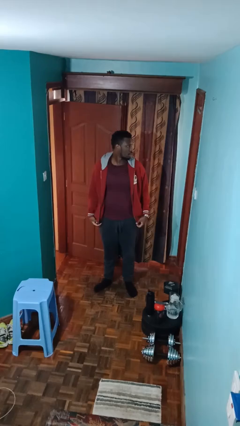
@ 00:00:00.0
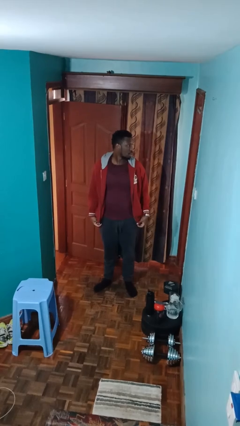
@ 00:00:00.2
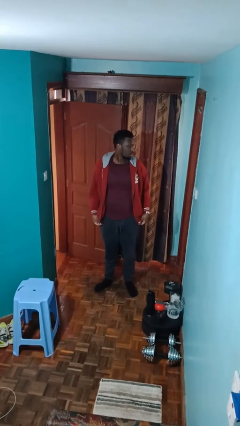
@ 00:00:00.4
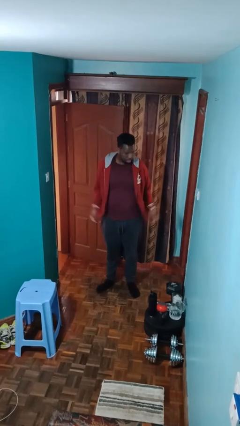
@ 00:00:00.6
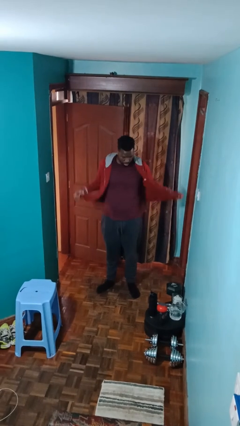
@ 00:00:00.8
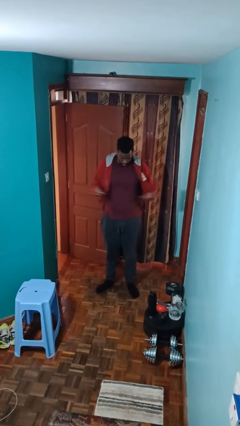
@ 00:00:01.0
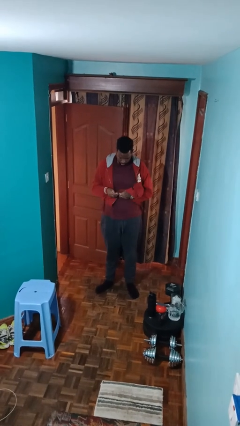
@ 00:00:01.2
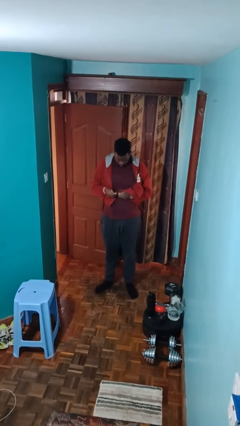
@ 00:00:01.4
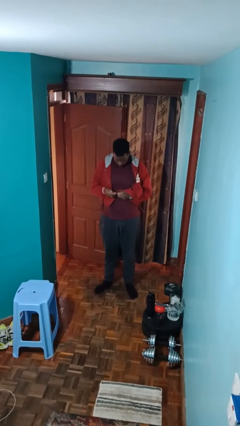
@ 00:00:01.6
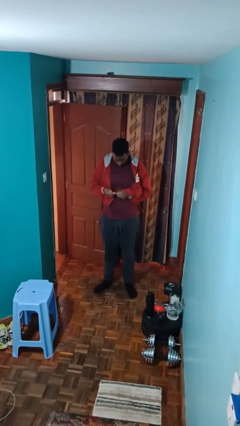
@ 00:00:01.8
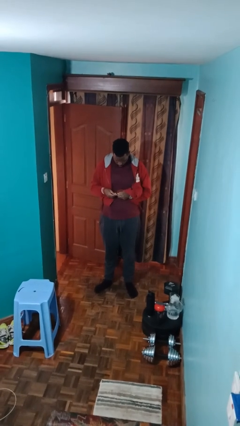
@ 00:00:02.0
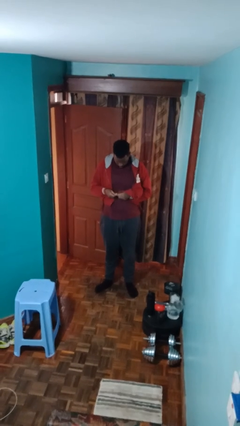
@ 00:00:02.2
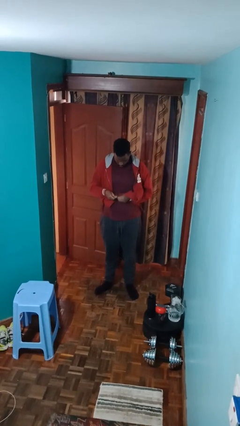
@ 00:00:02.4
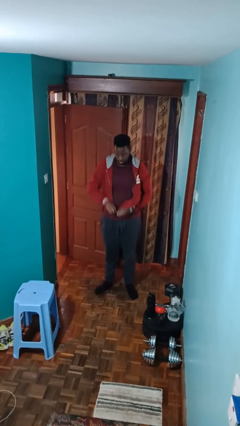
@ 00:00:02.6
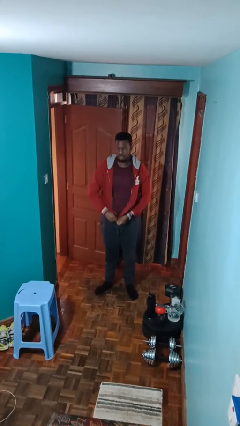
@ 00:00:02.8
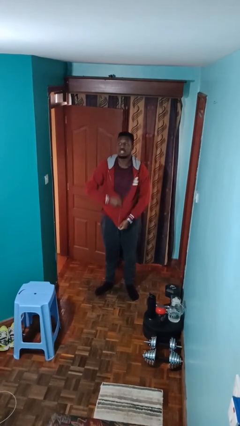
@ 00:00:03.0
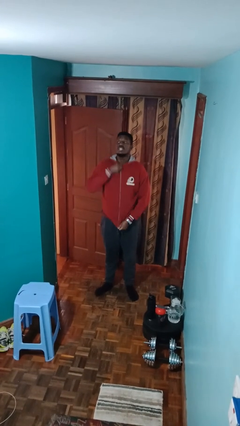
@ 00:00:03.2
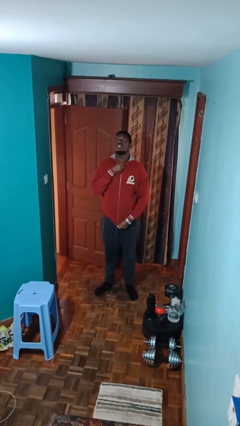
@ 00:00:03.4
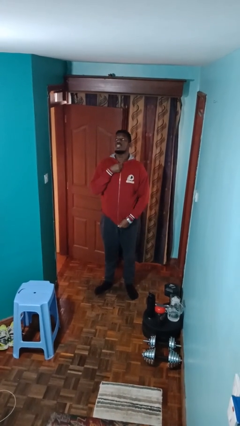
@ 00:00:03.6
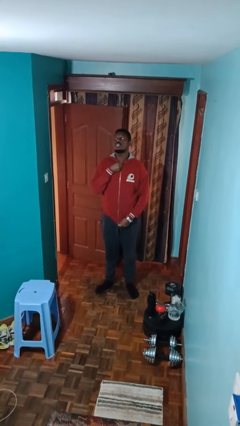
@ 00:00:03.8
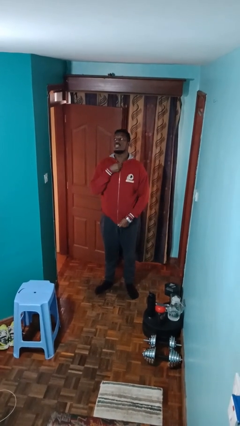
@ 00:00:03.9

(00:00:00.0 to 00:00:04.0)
person zips up jacket

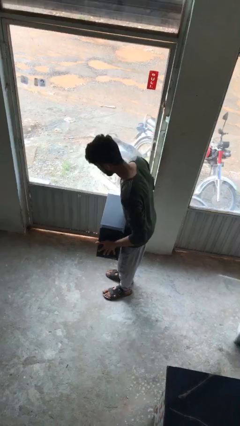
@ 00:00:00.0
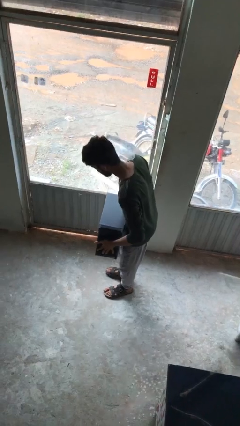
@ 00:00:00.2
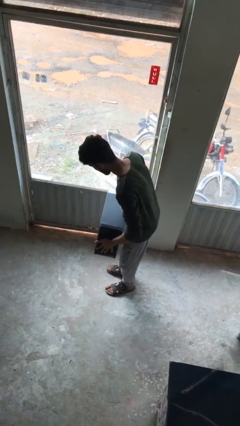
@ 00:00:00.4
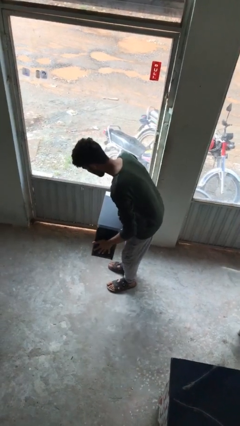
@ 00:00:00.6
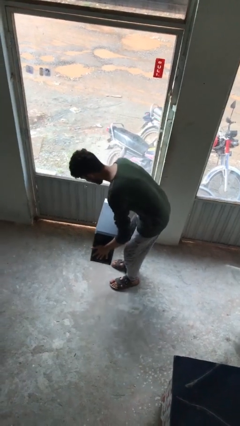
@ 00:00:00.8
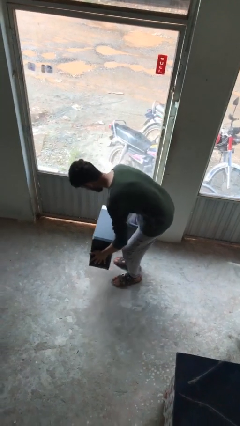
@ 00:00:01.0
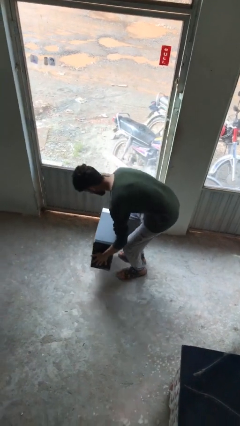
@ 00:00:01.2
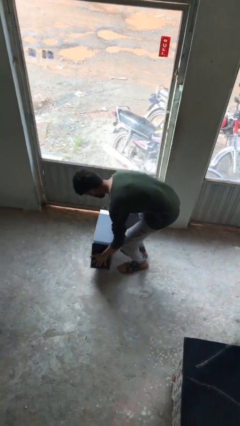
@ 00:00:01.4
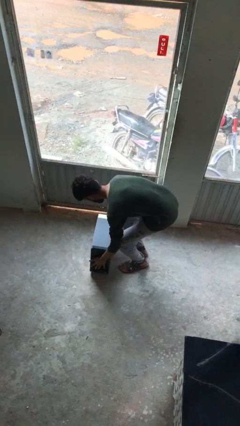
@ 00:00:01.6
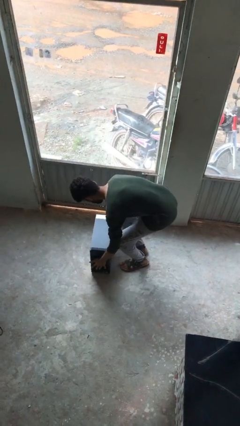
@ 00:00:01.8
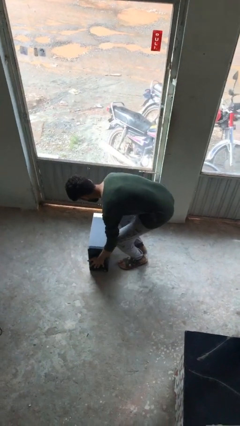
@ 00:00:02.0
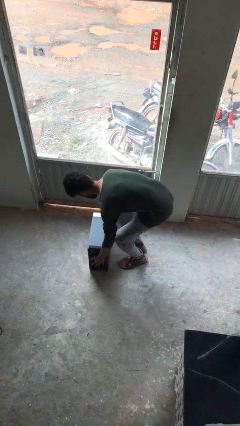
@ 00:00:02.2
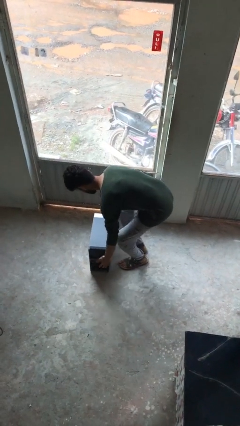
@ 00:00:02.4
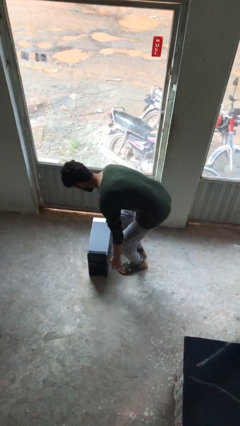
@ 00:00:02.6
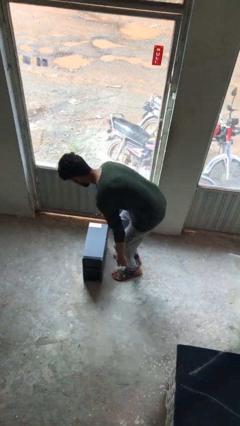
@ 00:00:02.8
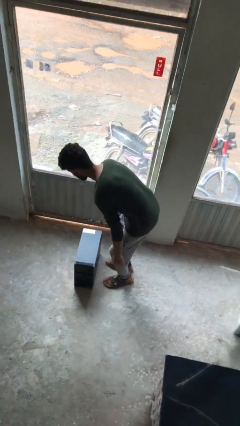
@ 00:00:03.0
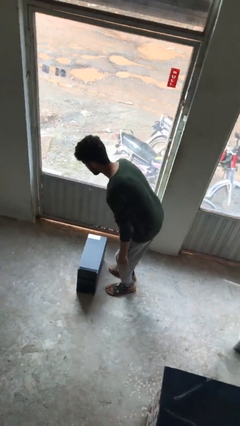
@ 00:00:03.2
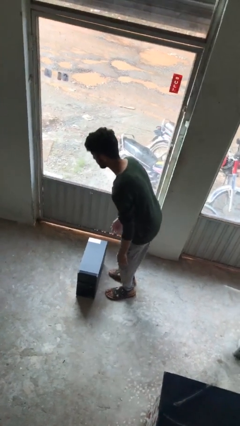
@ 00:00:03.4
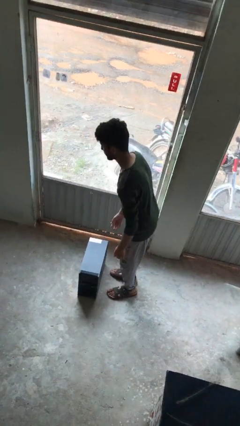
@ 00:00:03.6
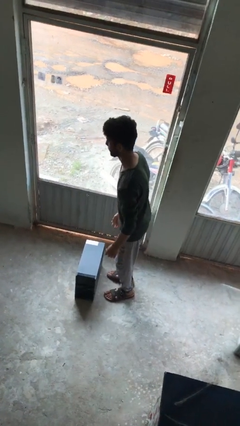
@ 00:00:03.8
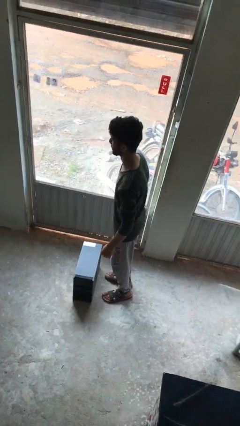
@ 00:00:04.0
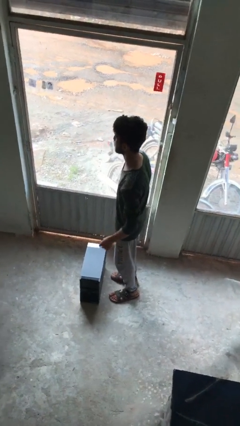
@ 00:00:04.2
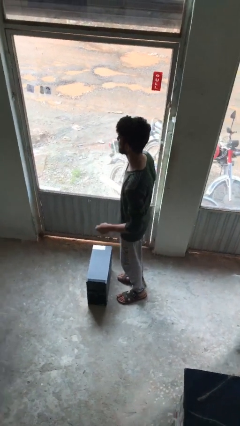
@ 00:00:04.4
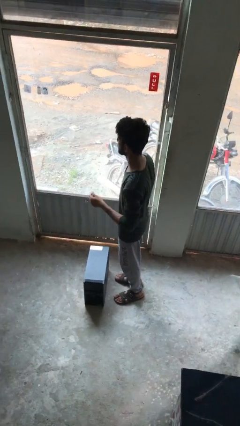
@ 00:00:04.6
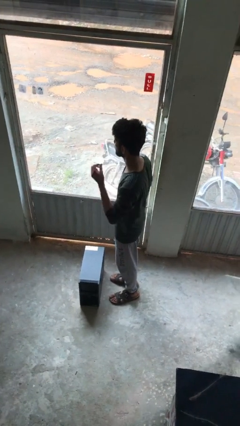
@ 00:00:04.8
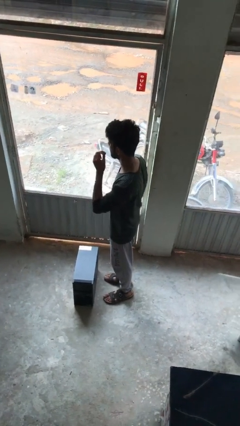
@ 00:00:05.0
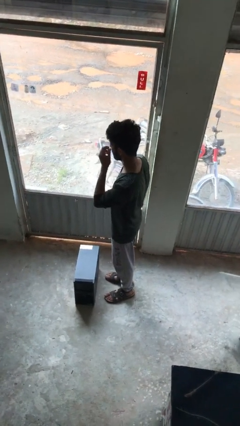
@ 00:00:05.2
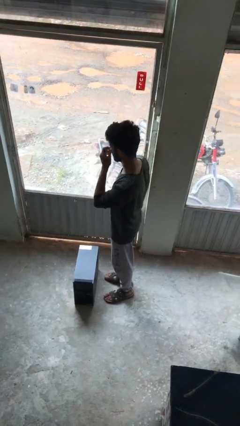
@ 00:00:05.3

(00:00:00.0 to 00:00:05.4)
person puts down object on floor

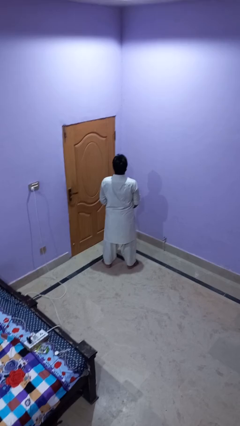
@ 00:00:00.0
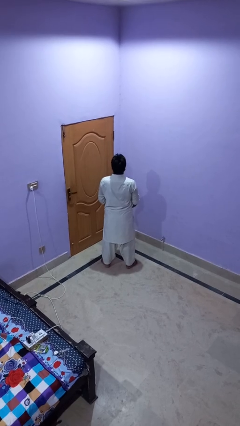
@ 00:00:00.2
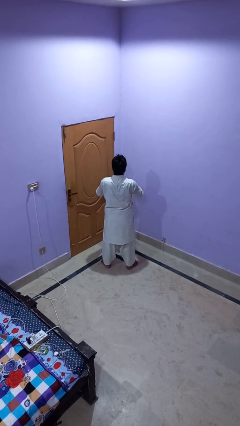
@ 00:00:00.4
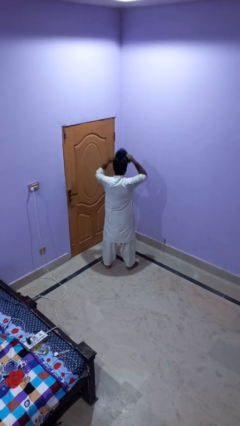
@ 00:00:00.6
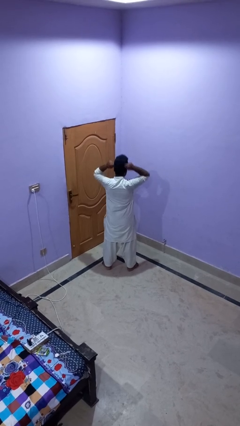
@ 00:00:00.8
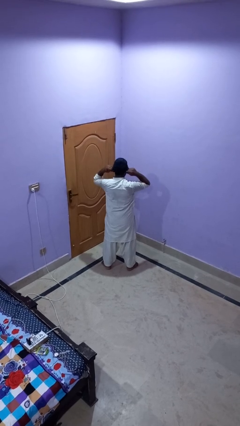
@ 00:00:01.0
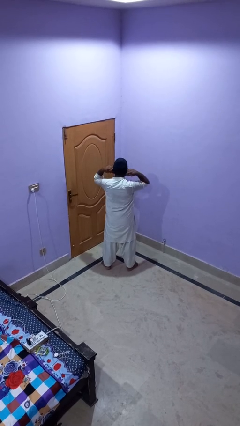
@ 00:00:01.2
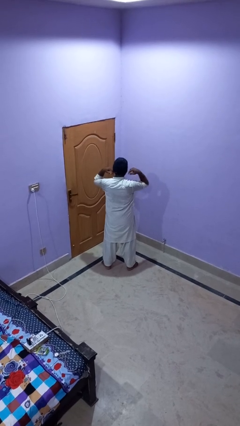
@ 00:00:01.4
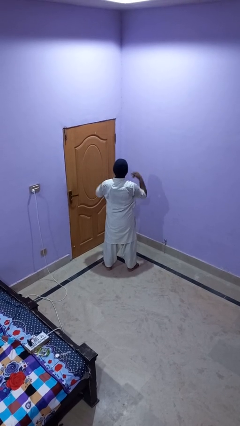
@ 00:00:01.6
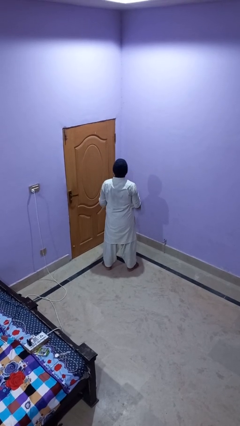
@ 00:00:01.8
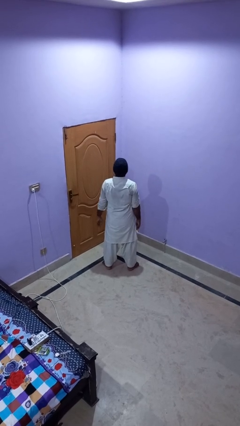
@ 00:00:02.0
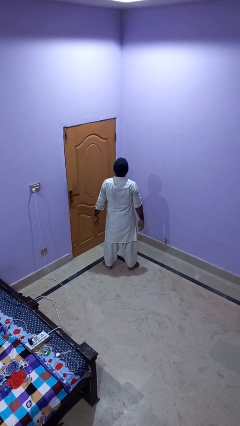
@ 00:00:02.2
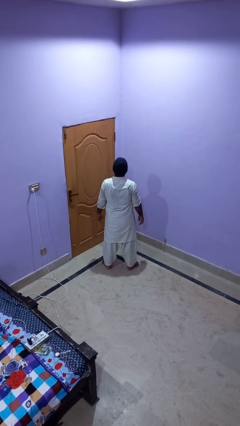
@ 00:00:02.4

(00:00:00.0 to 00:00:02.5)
person puts on hat

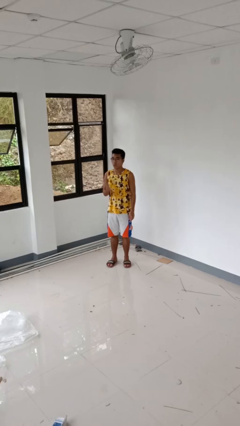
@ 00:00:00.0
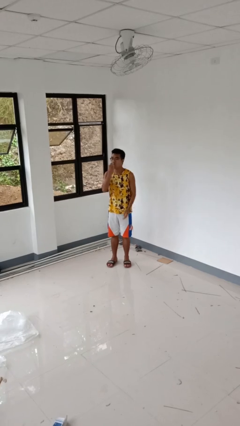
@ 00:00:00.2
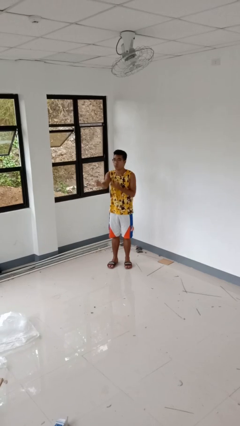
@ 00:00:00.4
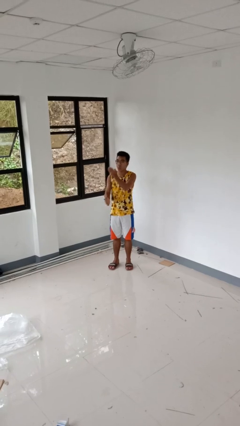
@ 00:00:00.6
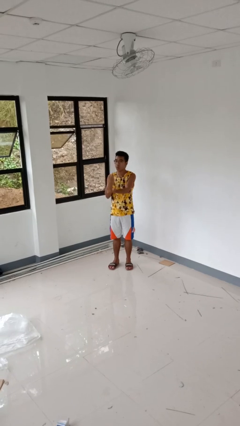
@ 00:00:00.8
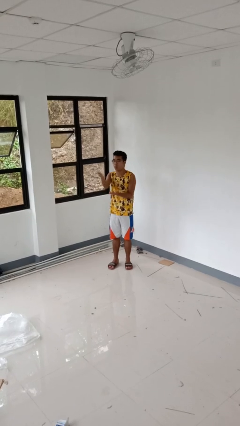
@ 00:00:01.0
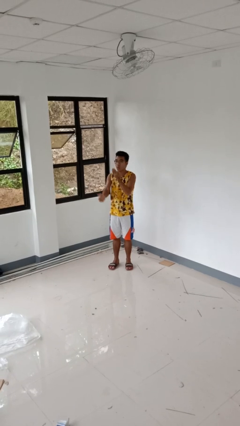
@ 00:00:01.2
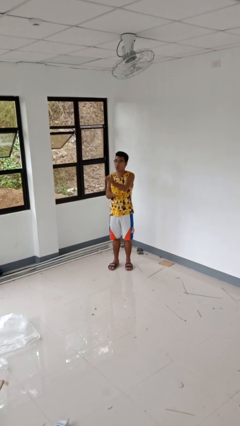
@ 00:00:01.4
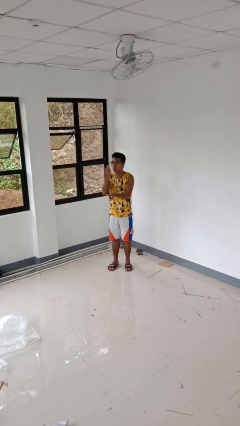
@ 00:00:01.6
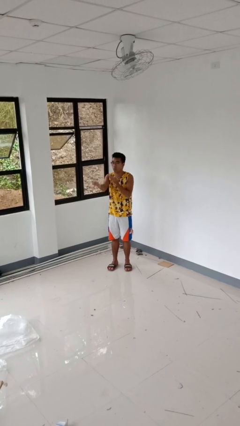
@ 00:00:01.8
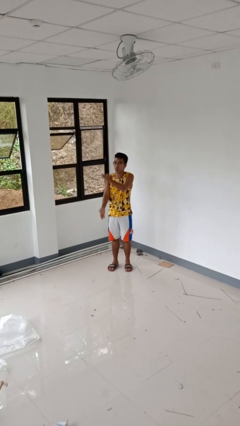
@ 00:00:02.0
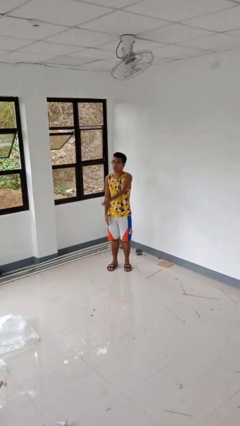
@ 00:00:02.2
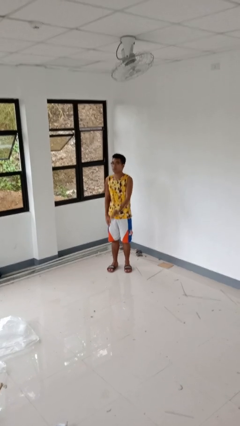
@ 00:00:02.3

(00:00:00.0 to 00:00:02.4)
person gestures blow kiss

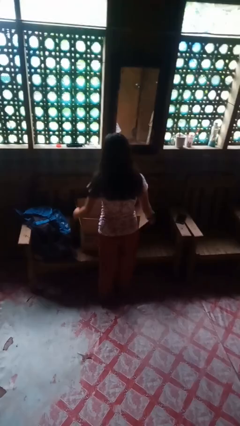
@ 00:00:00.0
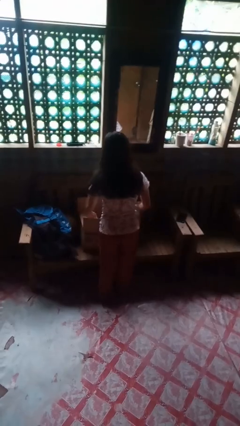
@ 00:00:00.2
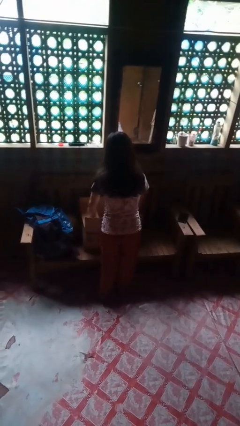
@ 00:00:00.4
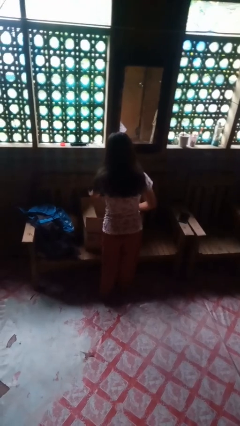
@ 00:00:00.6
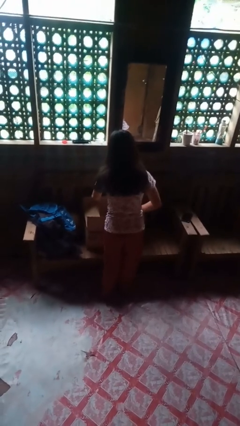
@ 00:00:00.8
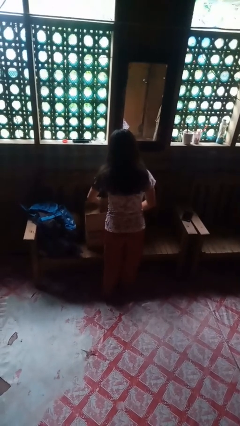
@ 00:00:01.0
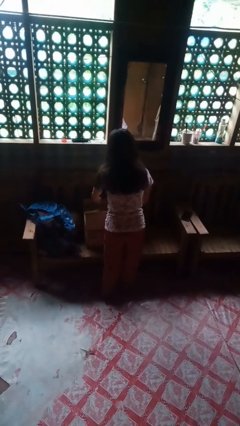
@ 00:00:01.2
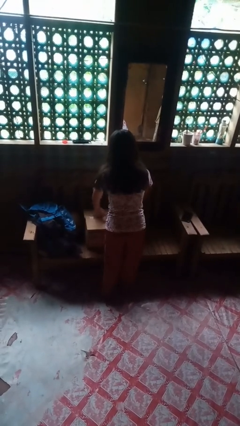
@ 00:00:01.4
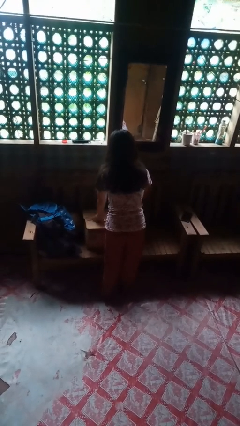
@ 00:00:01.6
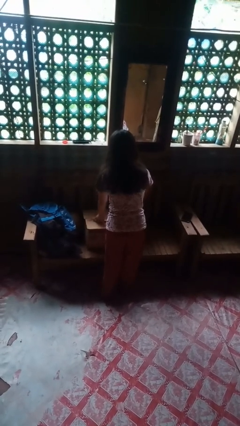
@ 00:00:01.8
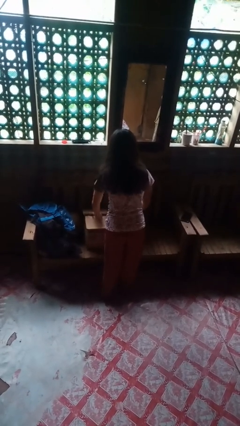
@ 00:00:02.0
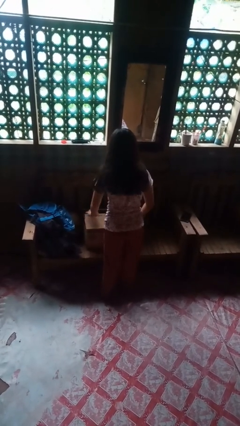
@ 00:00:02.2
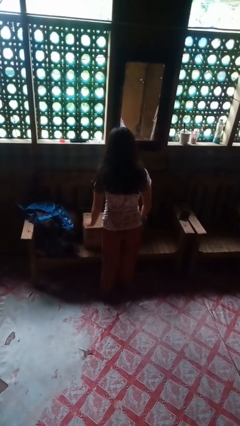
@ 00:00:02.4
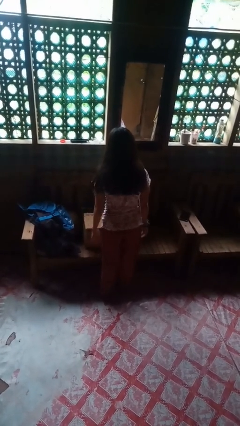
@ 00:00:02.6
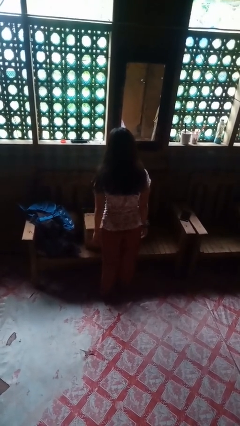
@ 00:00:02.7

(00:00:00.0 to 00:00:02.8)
person closes box

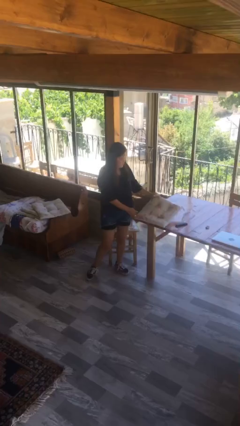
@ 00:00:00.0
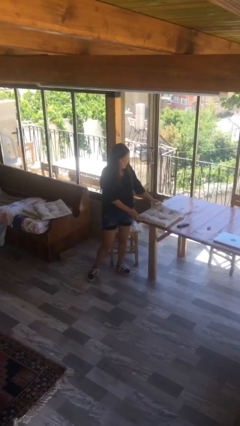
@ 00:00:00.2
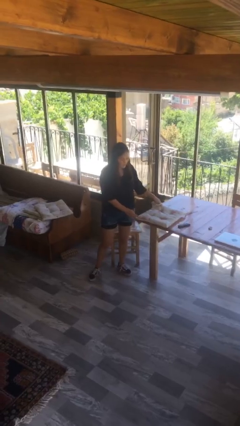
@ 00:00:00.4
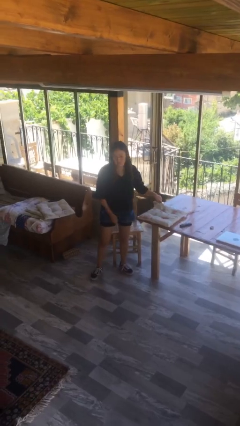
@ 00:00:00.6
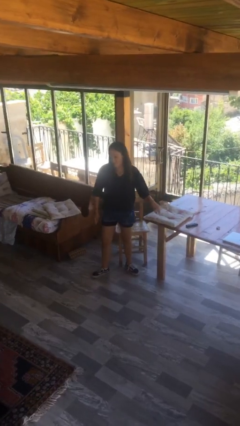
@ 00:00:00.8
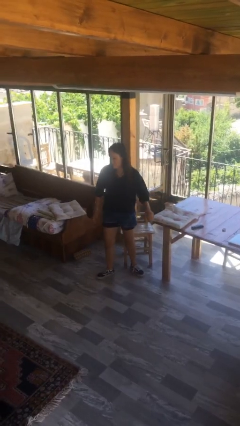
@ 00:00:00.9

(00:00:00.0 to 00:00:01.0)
person puts down object on table
